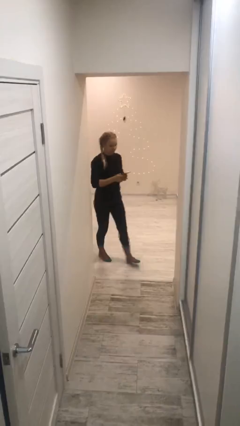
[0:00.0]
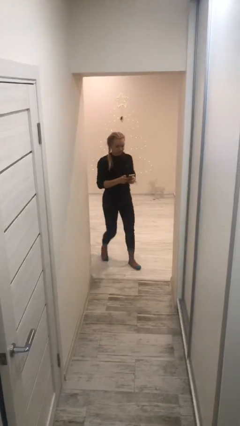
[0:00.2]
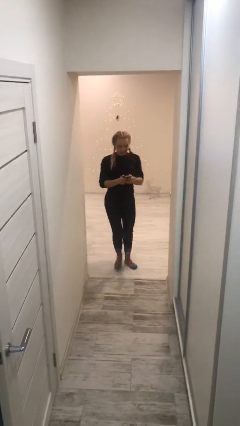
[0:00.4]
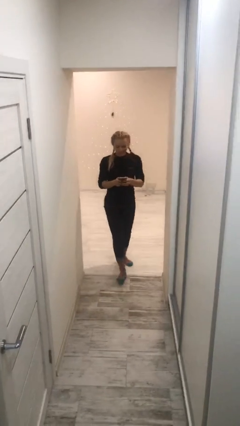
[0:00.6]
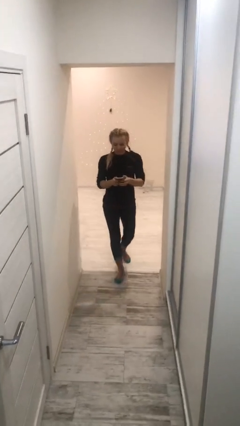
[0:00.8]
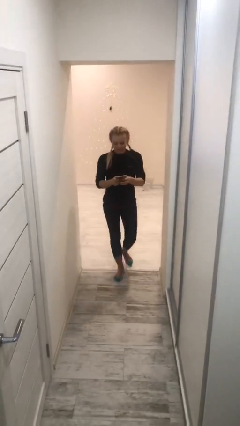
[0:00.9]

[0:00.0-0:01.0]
person enters scene through structure

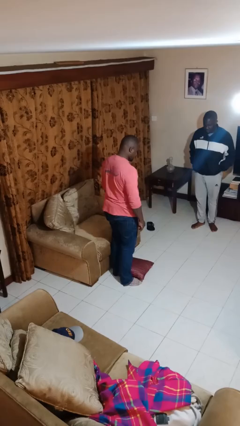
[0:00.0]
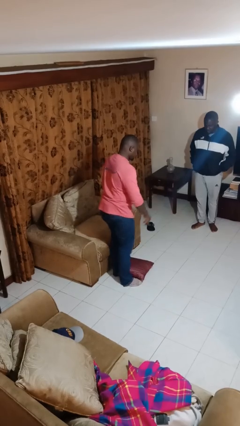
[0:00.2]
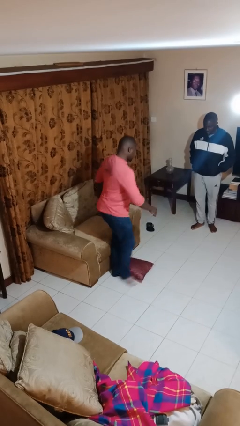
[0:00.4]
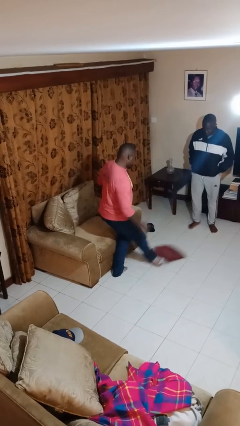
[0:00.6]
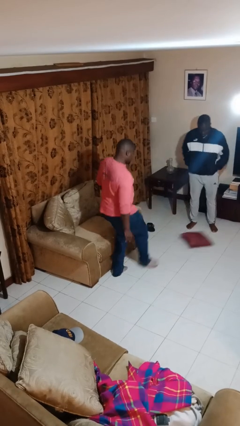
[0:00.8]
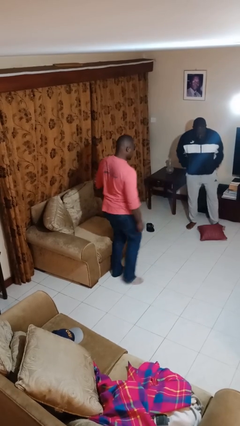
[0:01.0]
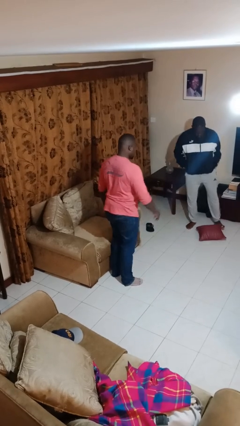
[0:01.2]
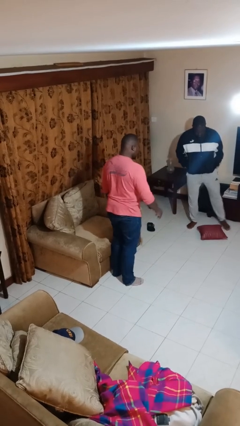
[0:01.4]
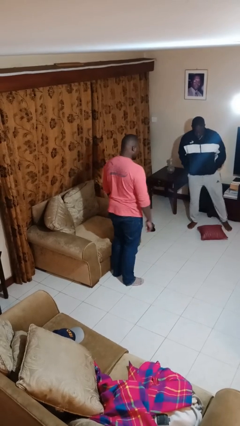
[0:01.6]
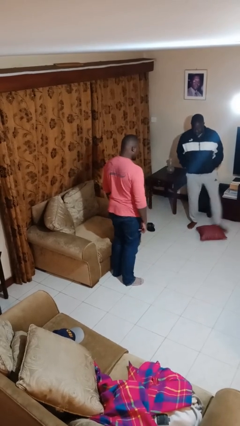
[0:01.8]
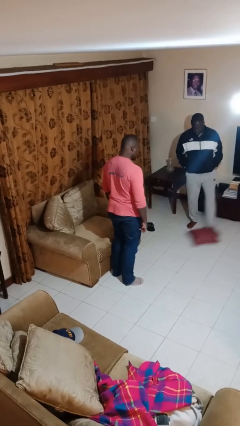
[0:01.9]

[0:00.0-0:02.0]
person kicks object to person

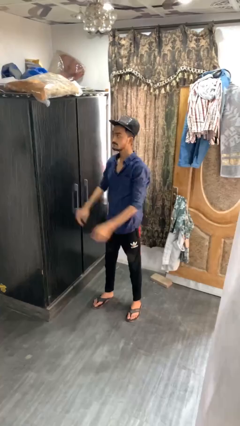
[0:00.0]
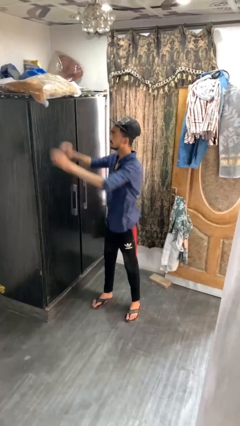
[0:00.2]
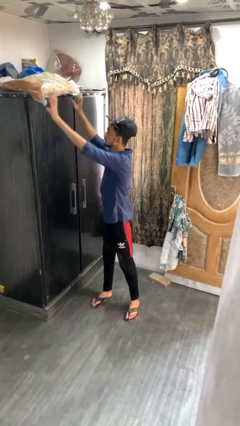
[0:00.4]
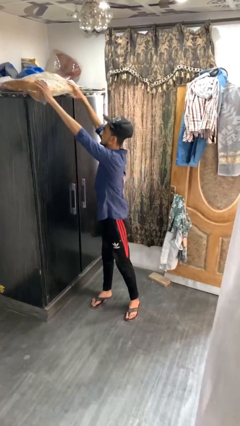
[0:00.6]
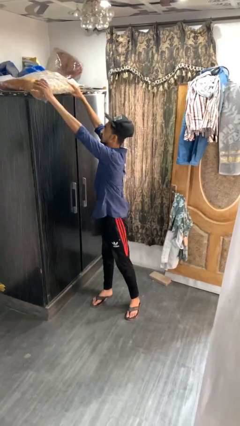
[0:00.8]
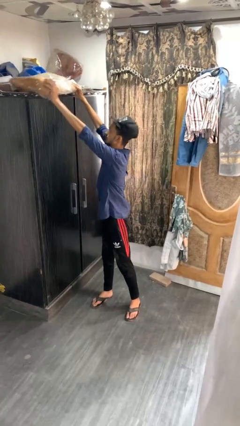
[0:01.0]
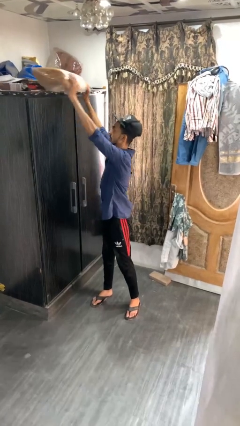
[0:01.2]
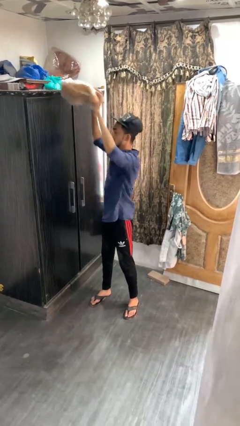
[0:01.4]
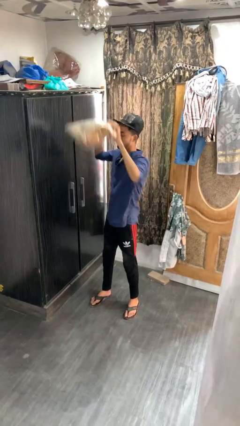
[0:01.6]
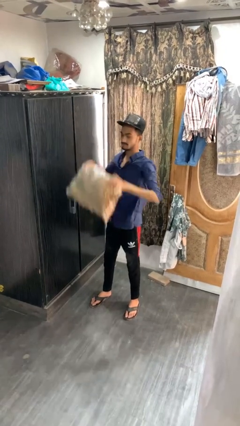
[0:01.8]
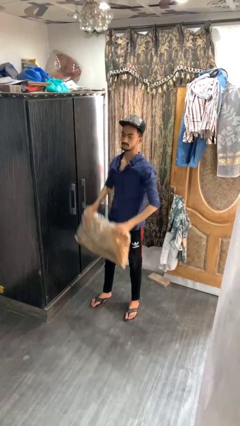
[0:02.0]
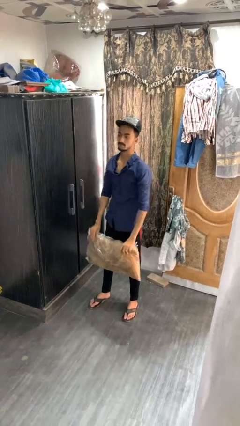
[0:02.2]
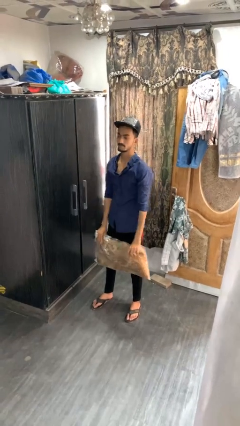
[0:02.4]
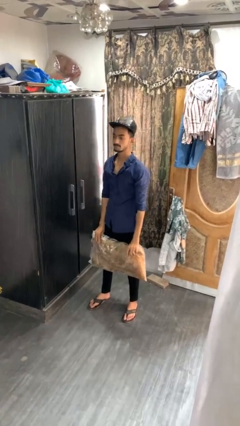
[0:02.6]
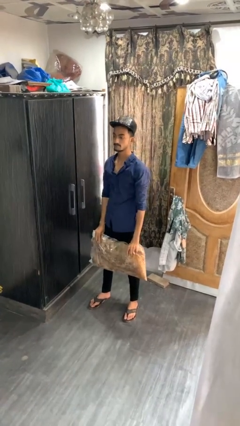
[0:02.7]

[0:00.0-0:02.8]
person picks up object from shelf

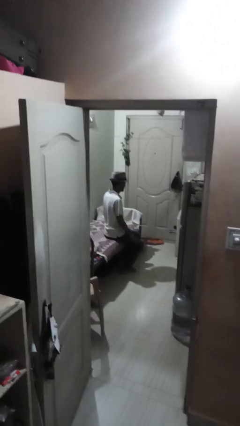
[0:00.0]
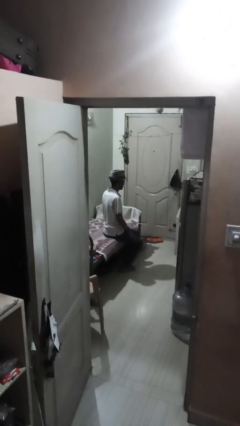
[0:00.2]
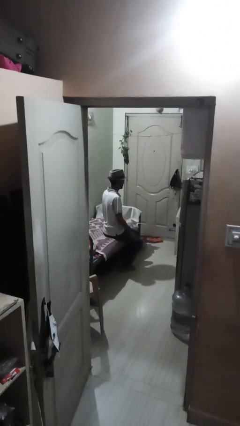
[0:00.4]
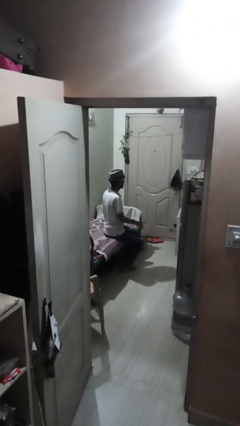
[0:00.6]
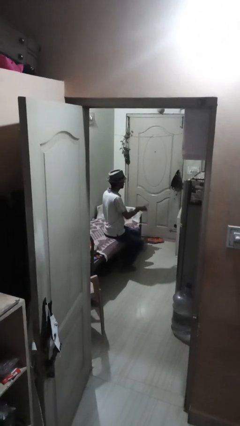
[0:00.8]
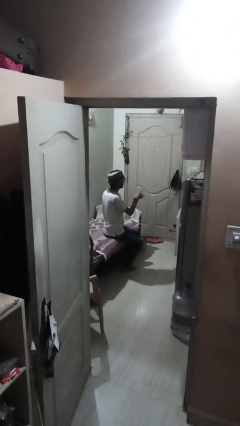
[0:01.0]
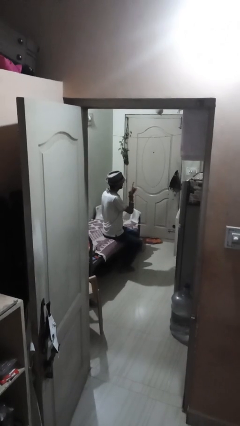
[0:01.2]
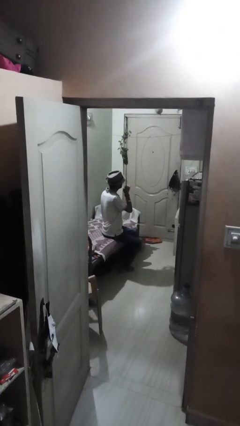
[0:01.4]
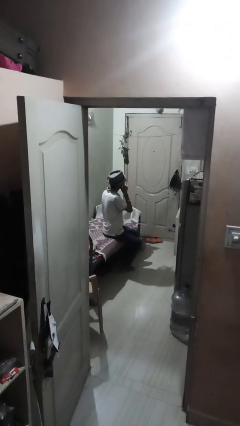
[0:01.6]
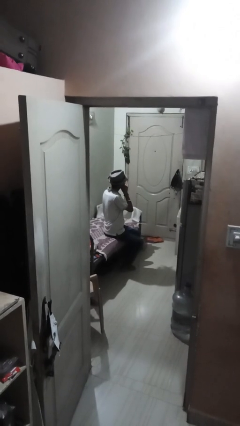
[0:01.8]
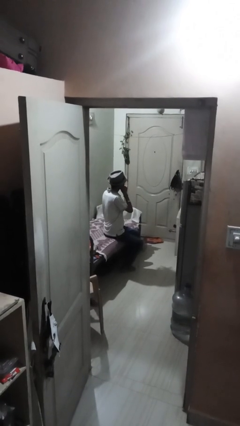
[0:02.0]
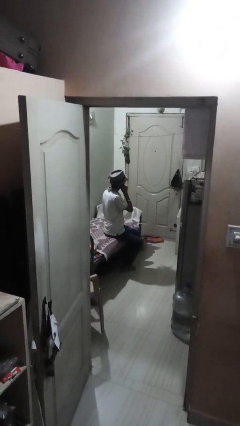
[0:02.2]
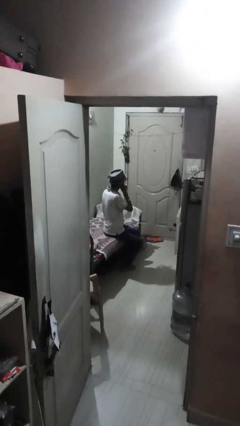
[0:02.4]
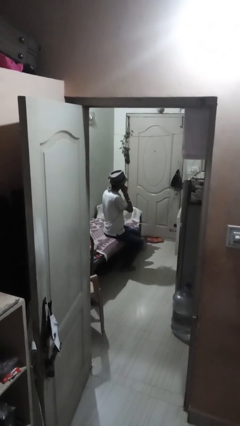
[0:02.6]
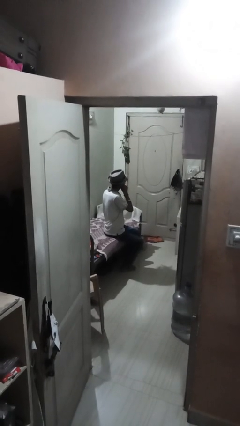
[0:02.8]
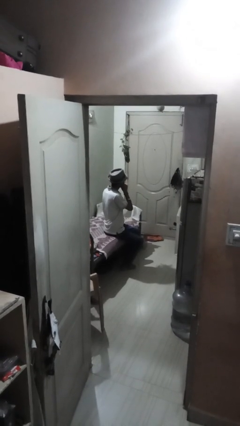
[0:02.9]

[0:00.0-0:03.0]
person gestures be quiet

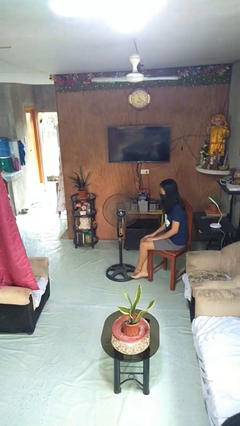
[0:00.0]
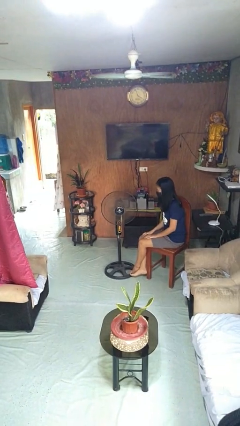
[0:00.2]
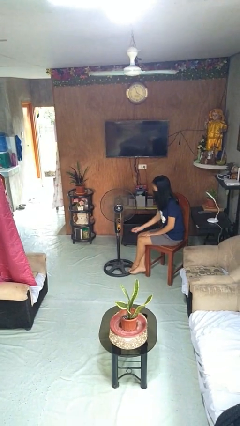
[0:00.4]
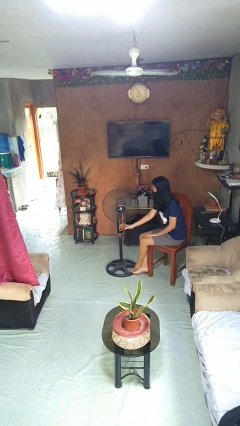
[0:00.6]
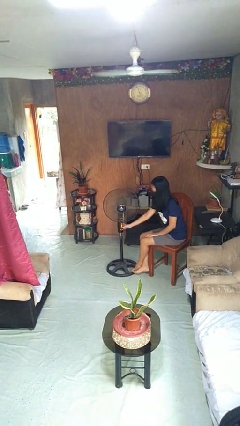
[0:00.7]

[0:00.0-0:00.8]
person turns off fan

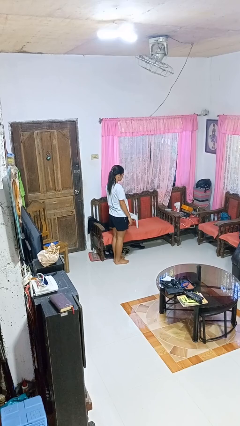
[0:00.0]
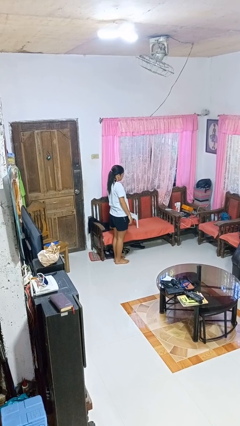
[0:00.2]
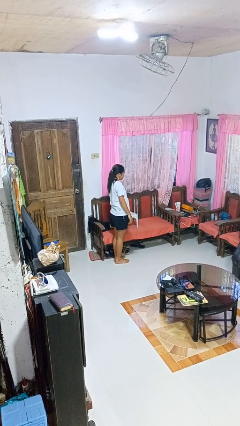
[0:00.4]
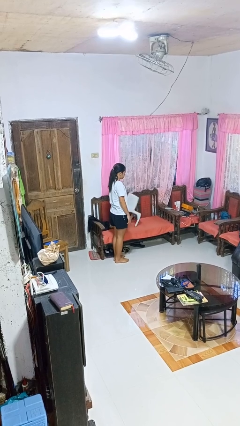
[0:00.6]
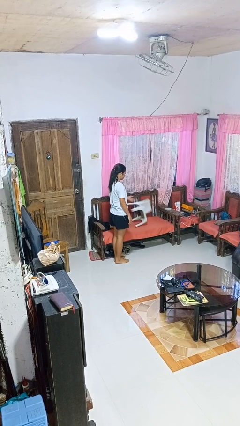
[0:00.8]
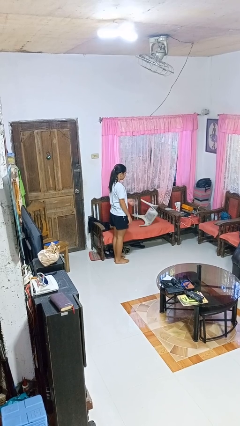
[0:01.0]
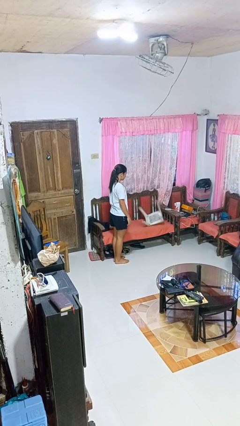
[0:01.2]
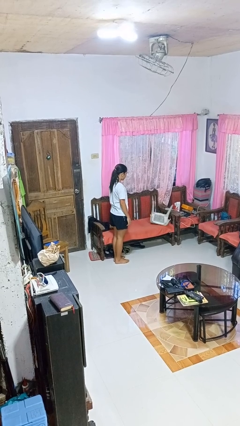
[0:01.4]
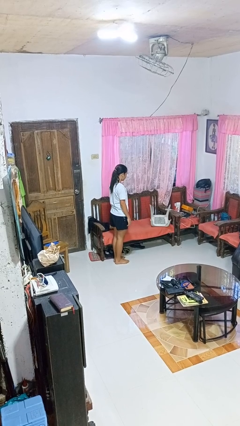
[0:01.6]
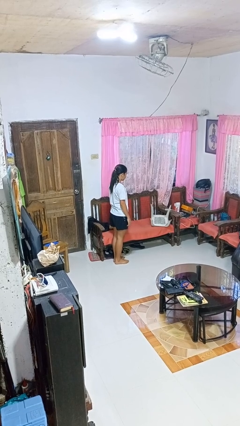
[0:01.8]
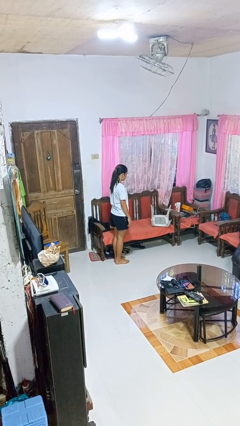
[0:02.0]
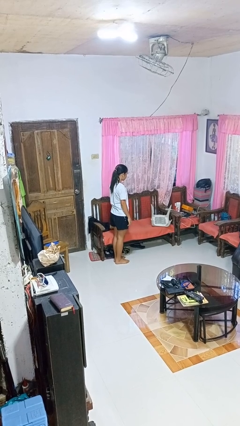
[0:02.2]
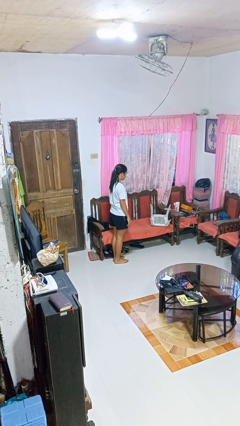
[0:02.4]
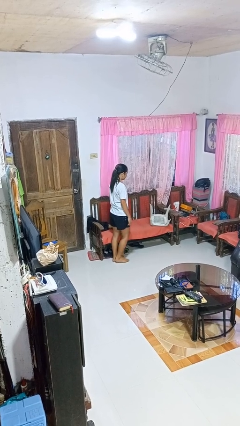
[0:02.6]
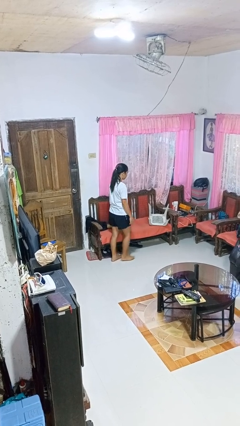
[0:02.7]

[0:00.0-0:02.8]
person knocks over furniture

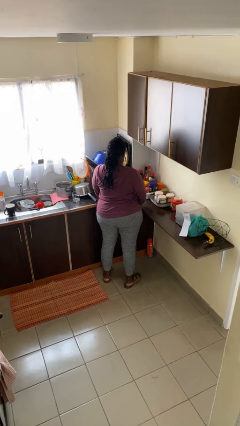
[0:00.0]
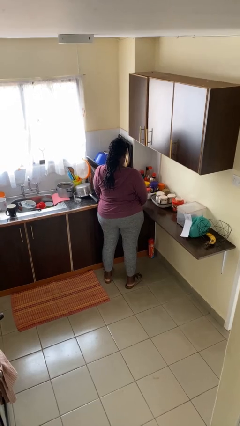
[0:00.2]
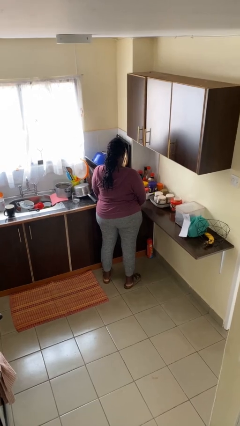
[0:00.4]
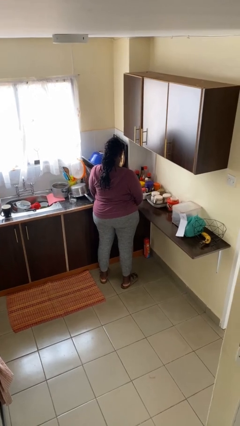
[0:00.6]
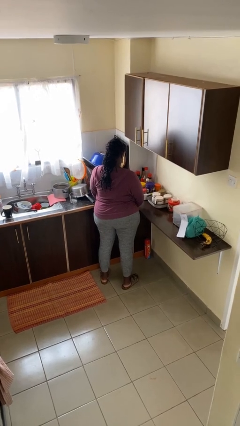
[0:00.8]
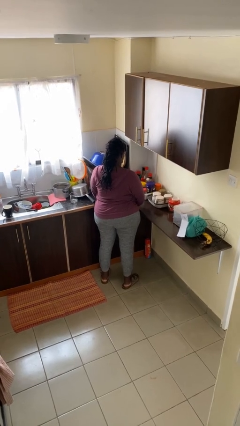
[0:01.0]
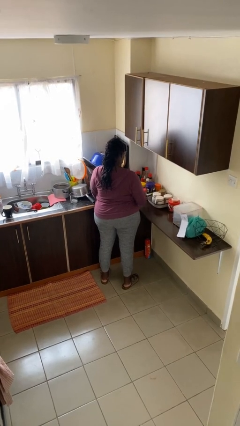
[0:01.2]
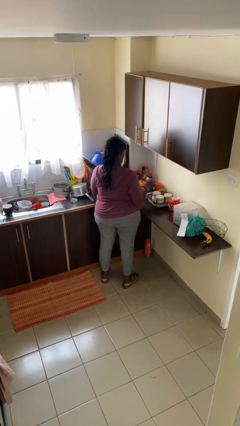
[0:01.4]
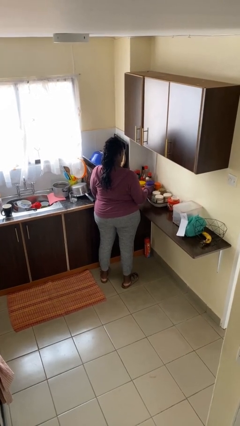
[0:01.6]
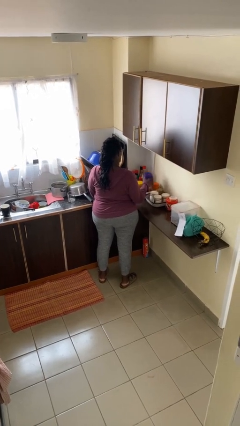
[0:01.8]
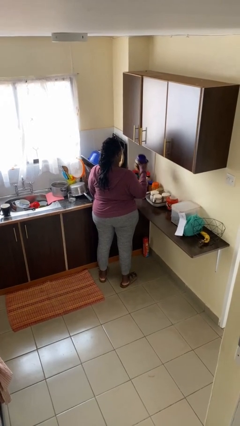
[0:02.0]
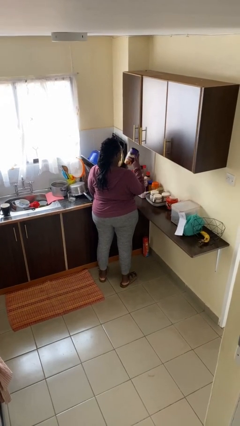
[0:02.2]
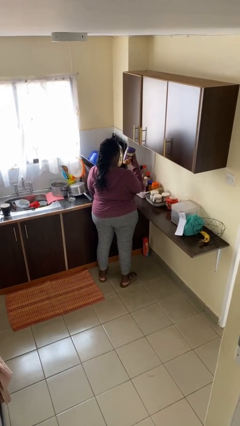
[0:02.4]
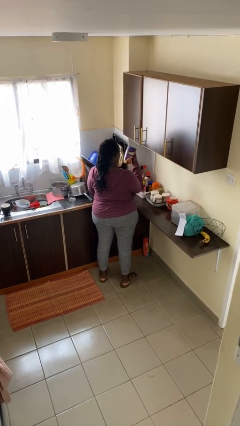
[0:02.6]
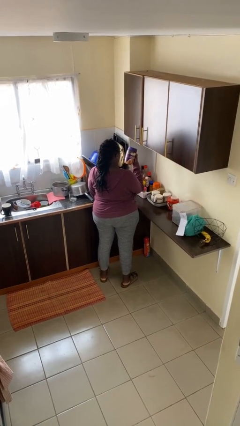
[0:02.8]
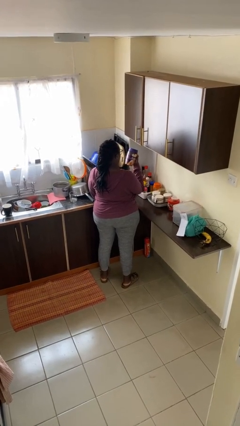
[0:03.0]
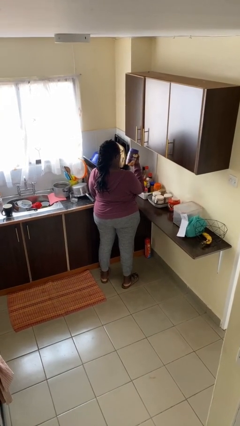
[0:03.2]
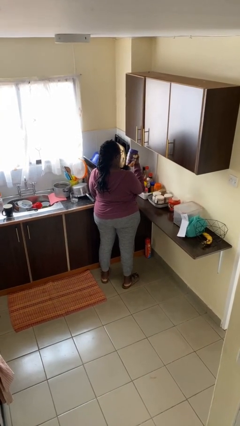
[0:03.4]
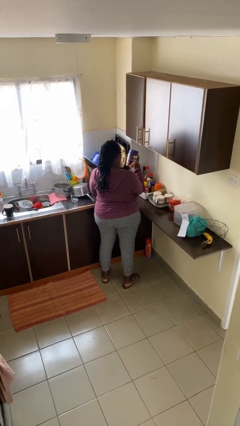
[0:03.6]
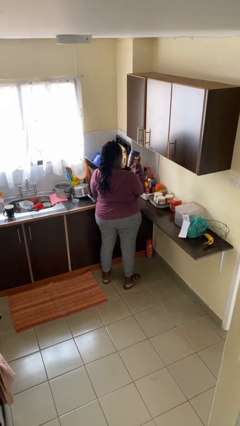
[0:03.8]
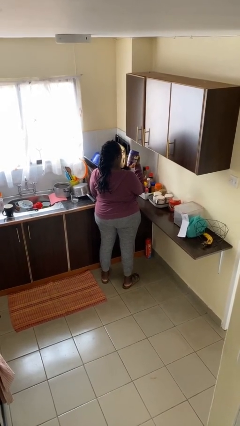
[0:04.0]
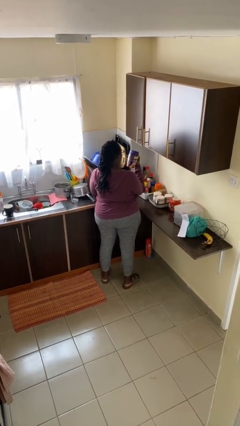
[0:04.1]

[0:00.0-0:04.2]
person picks up object from countertop

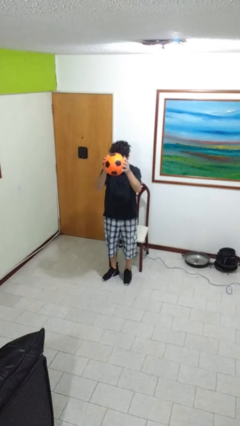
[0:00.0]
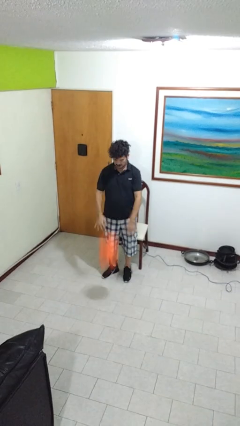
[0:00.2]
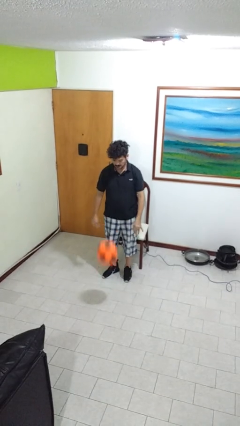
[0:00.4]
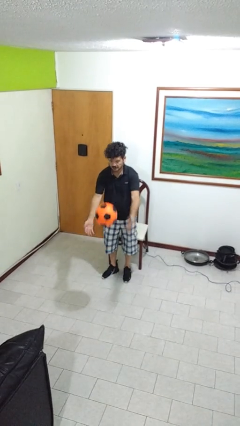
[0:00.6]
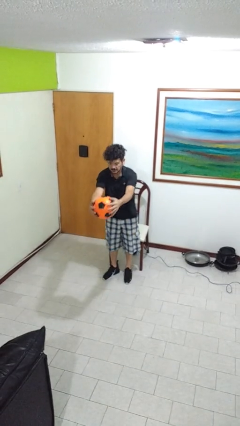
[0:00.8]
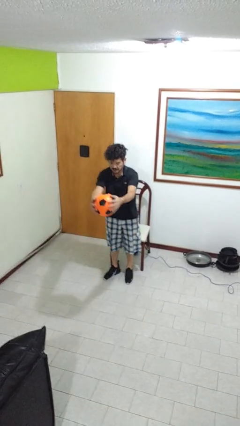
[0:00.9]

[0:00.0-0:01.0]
person bounces ball on floor
